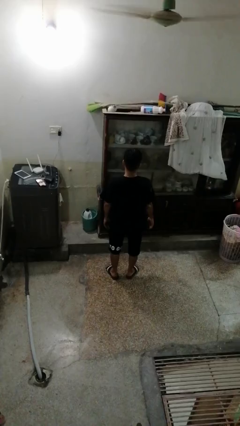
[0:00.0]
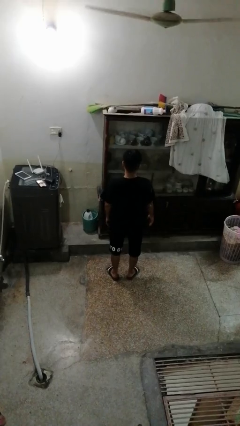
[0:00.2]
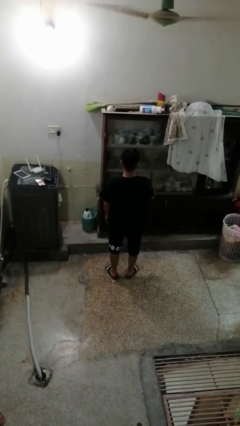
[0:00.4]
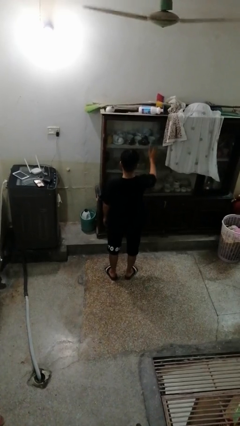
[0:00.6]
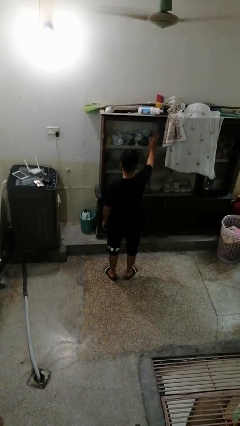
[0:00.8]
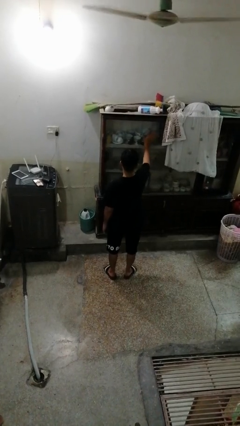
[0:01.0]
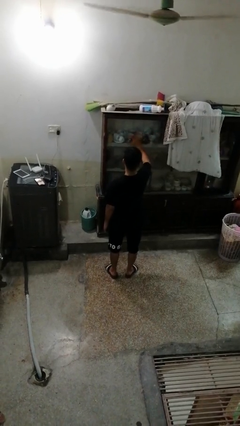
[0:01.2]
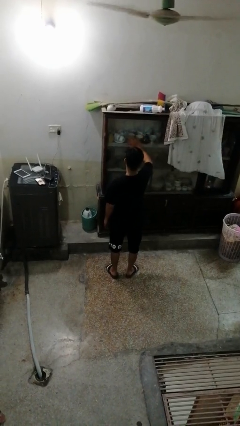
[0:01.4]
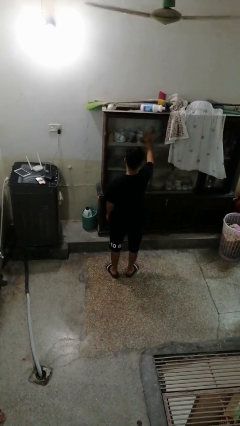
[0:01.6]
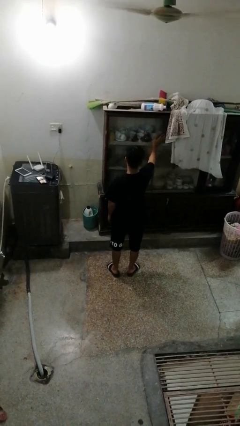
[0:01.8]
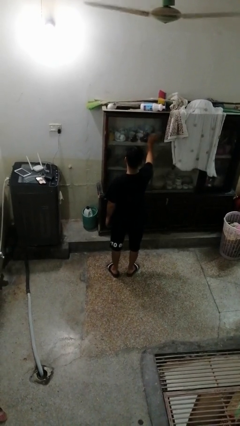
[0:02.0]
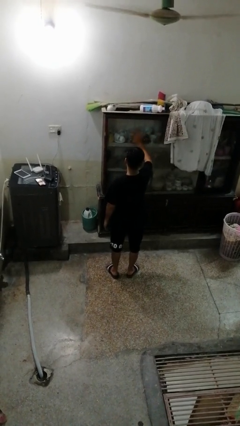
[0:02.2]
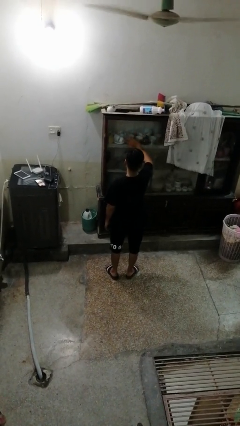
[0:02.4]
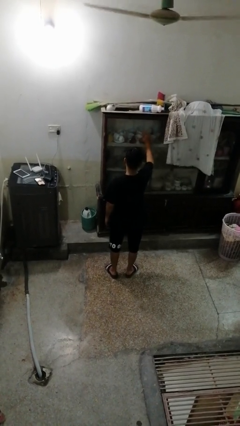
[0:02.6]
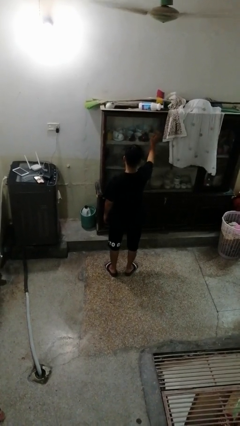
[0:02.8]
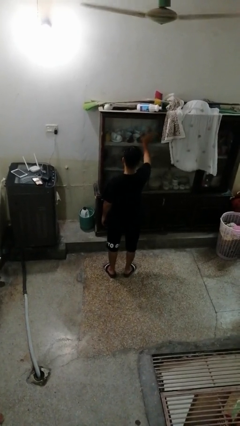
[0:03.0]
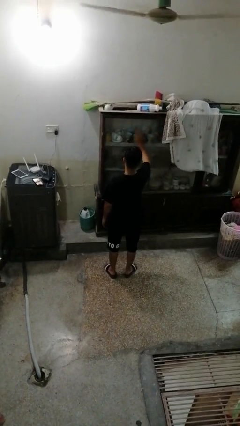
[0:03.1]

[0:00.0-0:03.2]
person waves hand over object

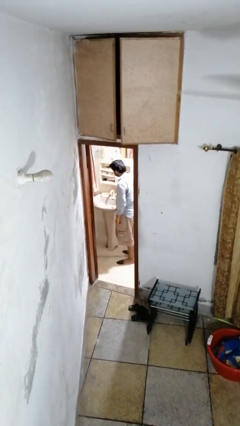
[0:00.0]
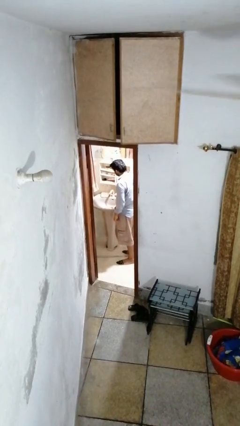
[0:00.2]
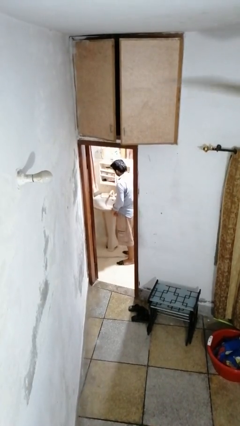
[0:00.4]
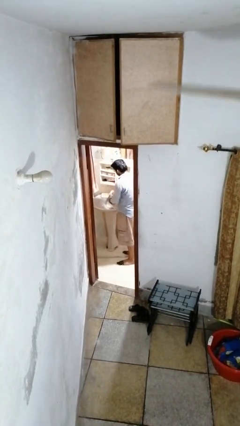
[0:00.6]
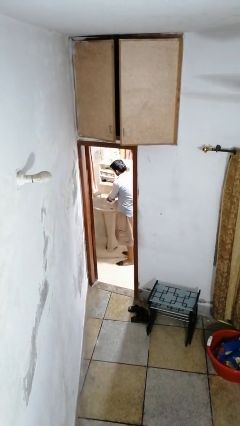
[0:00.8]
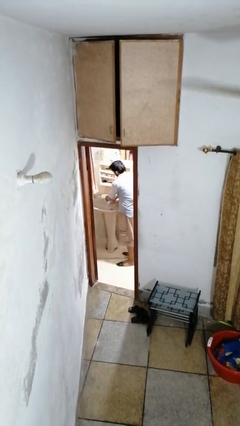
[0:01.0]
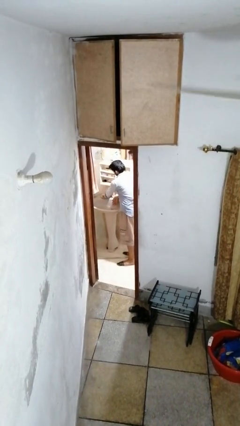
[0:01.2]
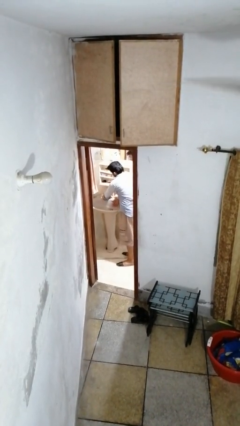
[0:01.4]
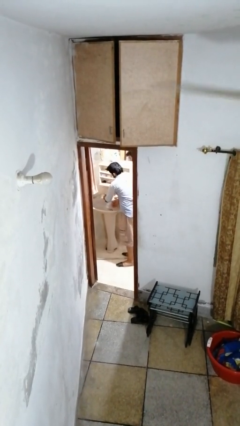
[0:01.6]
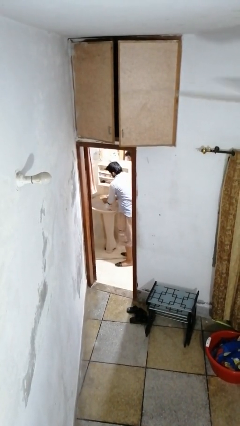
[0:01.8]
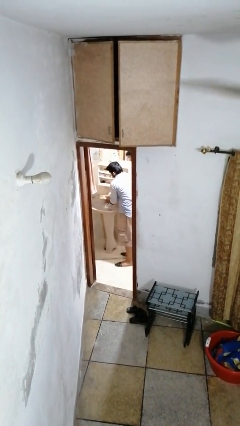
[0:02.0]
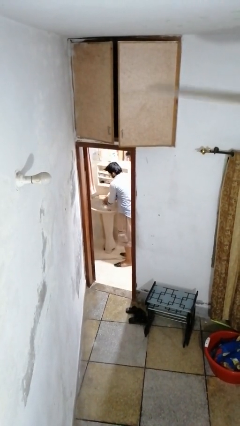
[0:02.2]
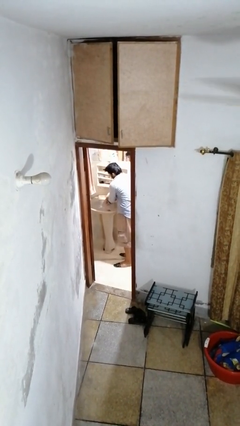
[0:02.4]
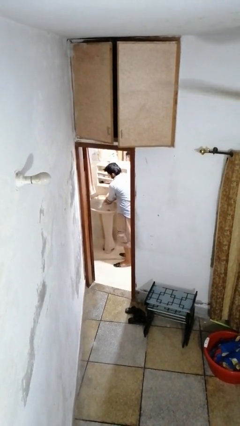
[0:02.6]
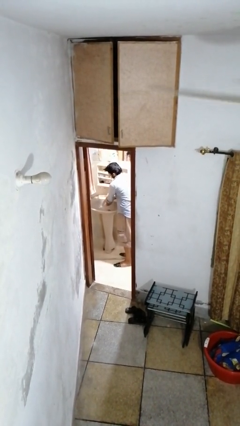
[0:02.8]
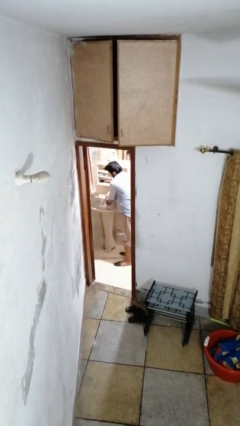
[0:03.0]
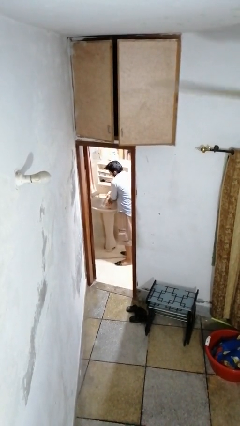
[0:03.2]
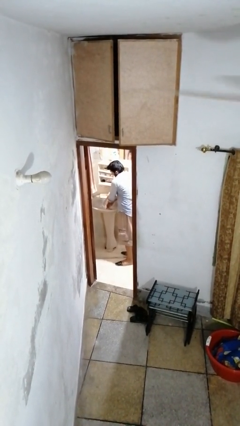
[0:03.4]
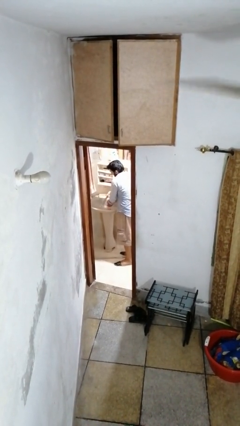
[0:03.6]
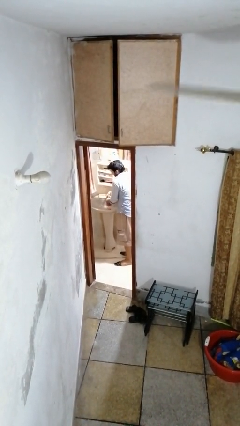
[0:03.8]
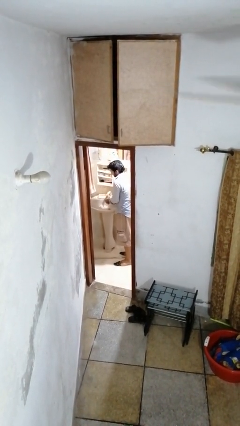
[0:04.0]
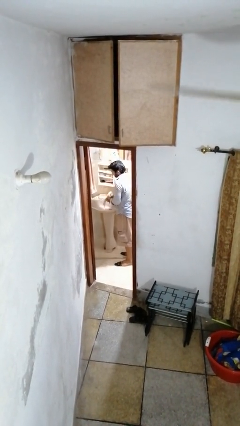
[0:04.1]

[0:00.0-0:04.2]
person washes hands

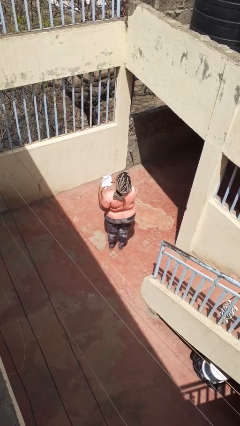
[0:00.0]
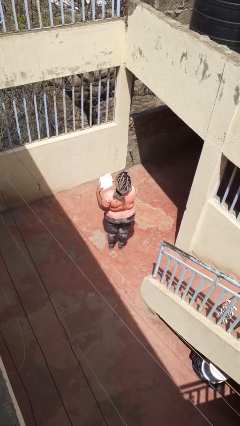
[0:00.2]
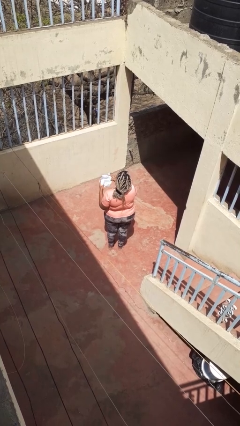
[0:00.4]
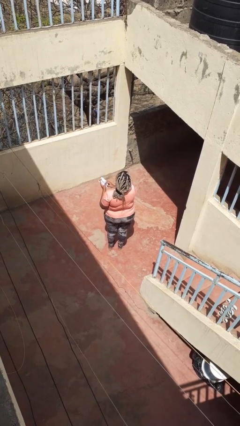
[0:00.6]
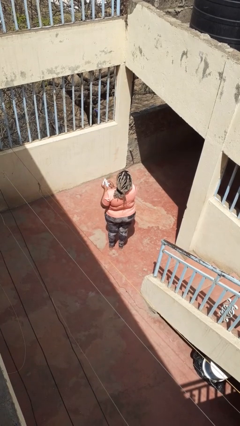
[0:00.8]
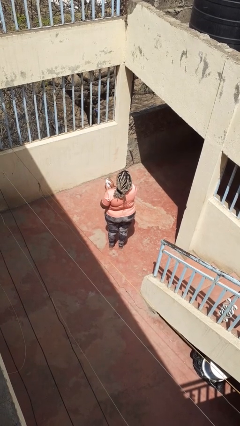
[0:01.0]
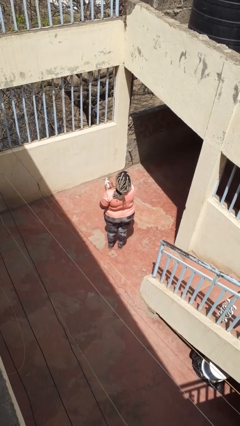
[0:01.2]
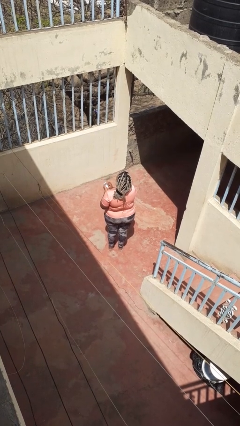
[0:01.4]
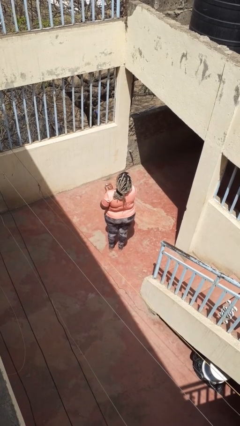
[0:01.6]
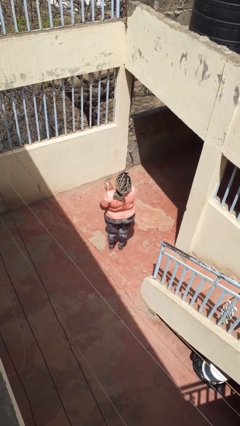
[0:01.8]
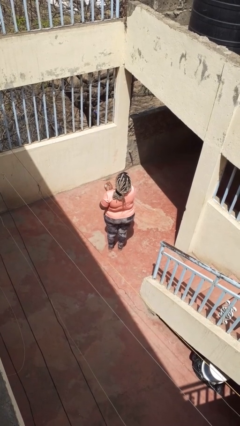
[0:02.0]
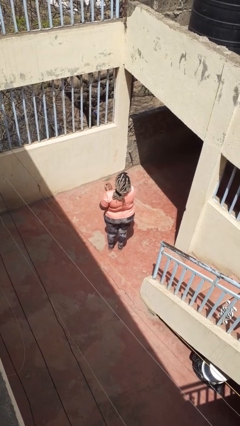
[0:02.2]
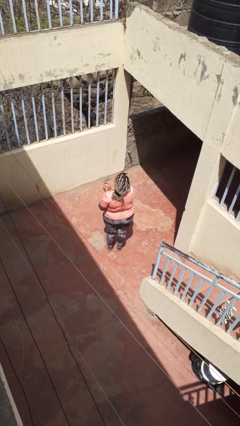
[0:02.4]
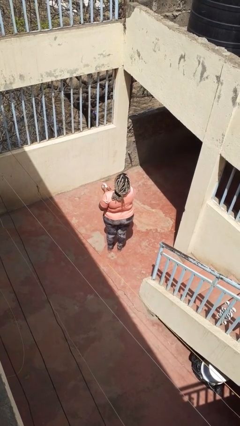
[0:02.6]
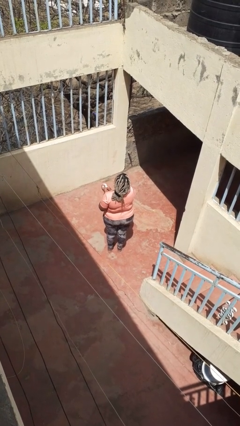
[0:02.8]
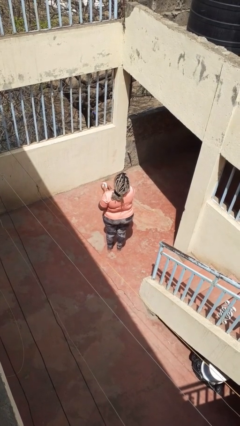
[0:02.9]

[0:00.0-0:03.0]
person crumples paper

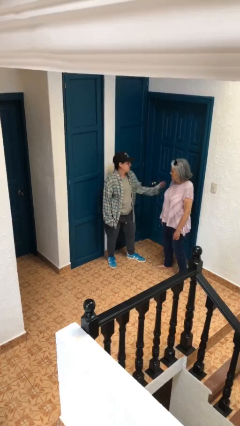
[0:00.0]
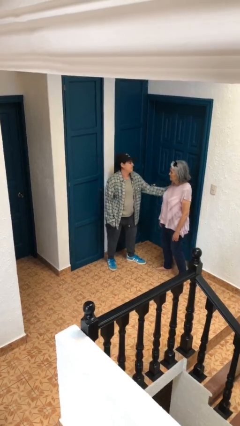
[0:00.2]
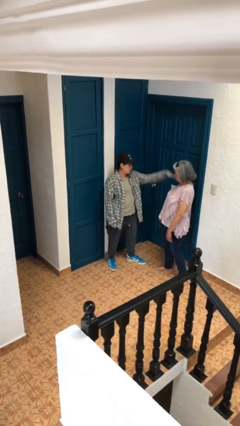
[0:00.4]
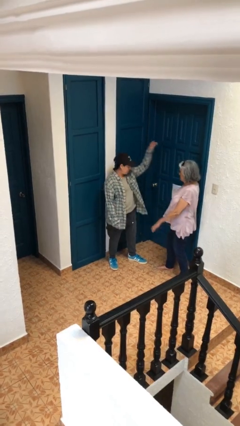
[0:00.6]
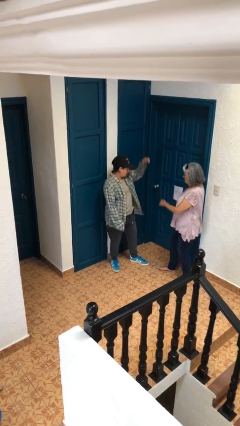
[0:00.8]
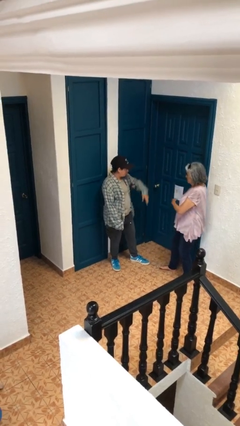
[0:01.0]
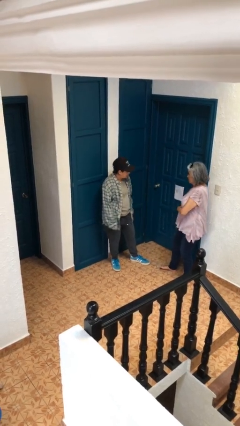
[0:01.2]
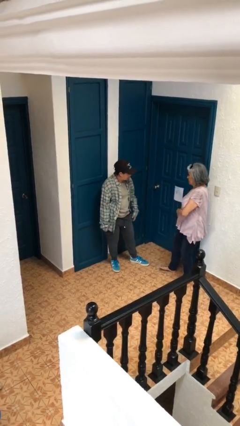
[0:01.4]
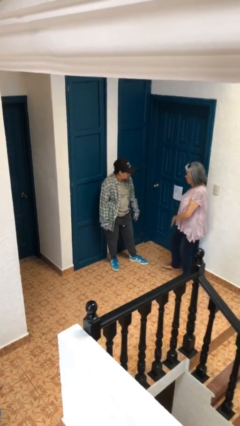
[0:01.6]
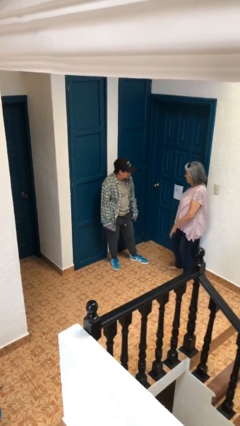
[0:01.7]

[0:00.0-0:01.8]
person shoves person

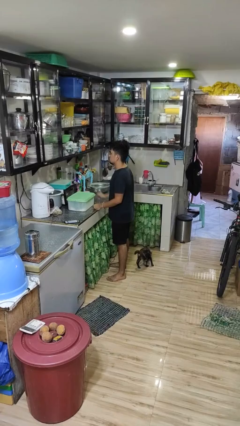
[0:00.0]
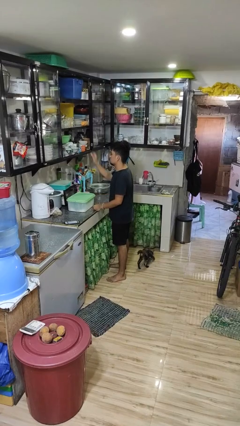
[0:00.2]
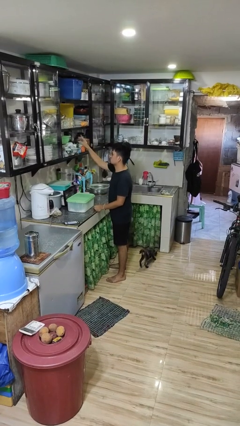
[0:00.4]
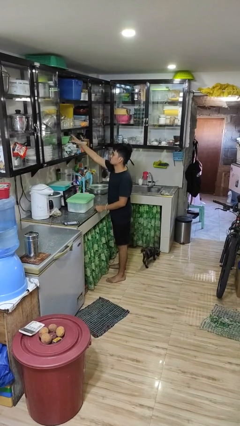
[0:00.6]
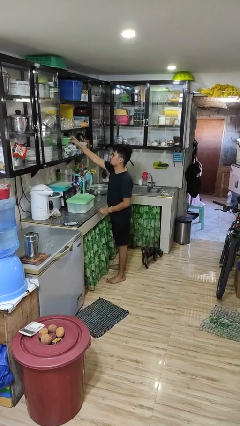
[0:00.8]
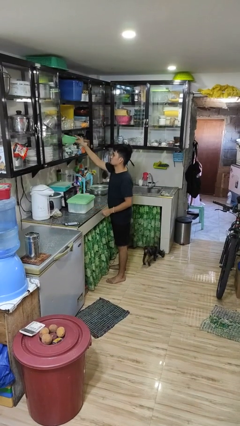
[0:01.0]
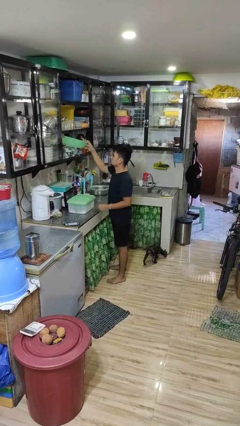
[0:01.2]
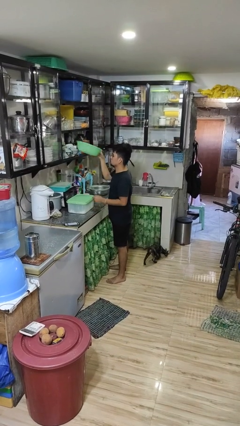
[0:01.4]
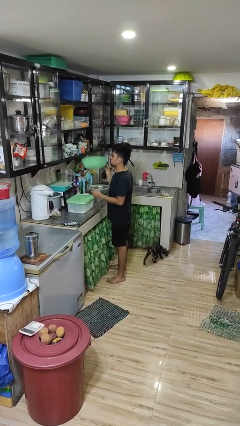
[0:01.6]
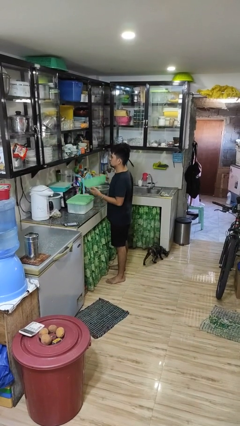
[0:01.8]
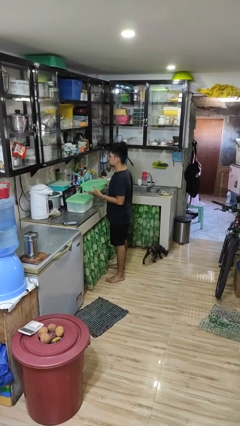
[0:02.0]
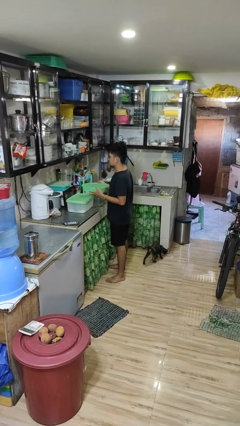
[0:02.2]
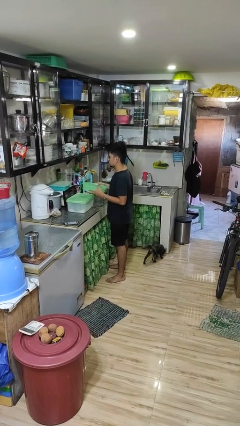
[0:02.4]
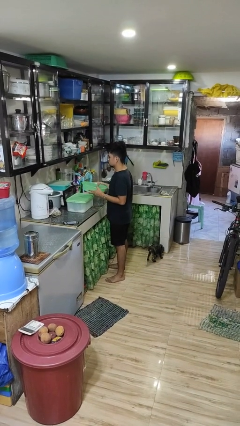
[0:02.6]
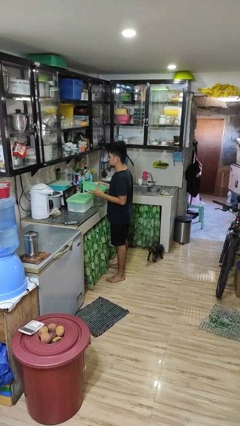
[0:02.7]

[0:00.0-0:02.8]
person picks up object from cabinet

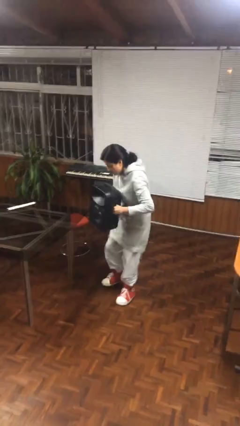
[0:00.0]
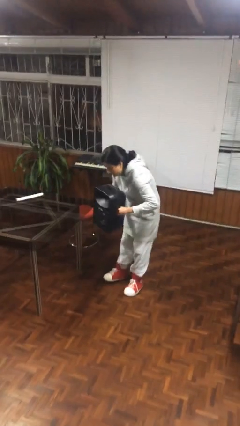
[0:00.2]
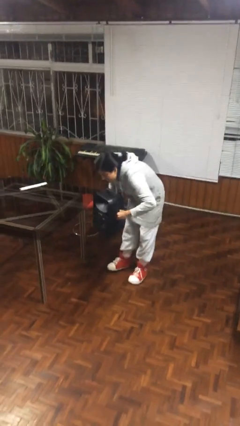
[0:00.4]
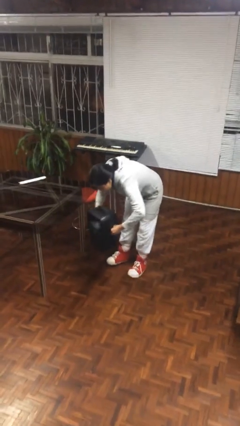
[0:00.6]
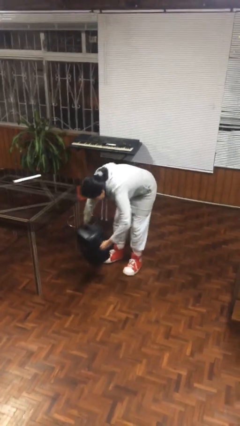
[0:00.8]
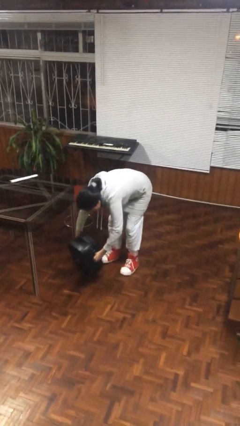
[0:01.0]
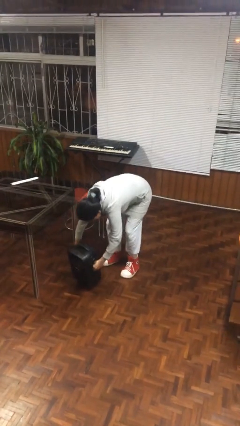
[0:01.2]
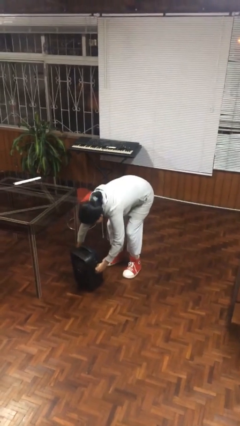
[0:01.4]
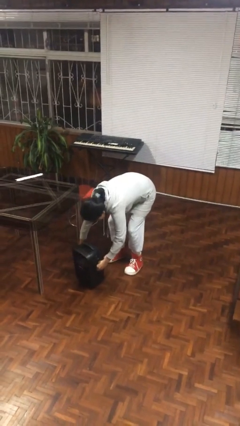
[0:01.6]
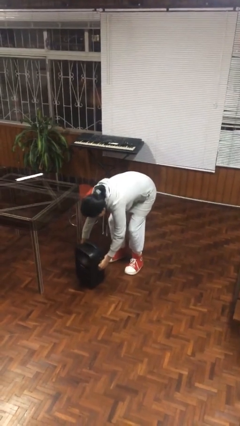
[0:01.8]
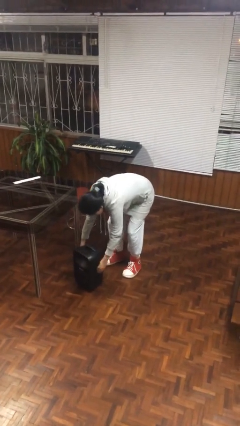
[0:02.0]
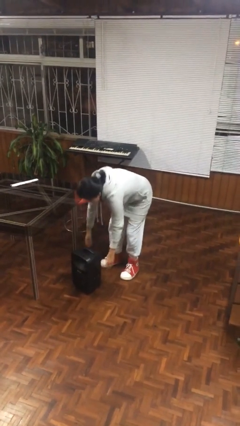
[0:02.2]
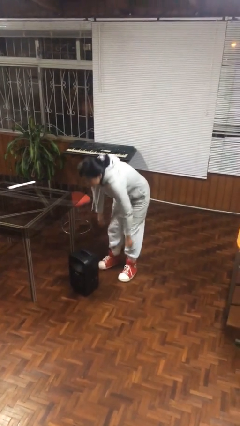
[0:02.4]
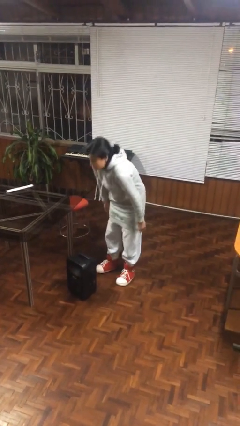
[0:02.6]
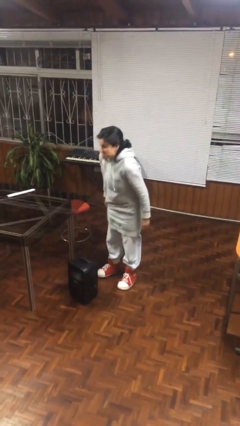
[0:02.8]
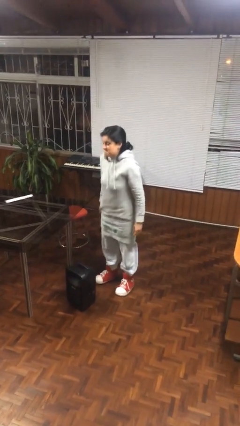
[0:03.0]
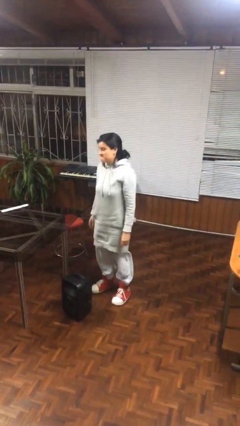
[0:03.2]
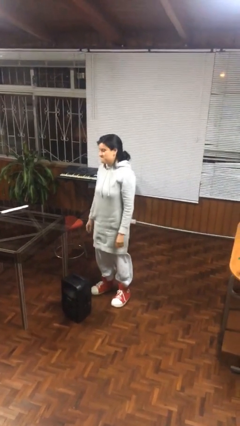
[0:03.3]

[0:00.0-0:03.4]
person puts down object on floor
